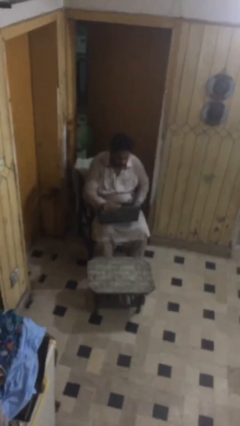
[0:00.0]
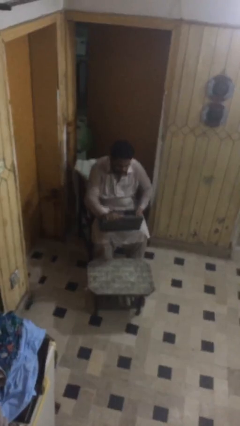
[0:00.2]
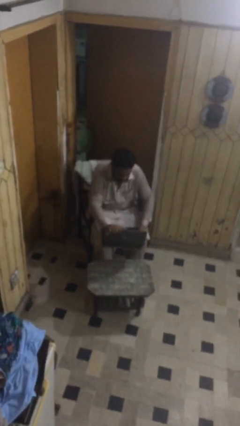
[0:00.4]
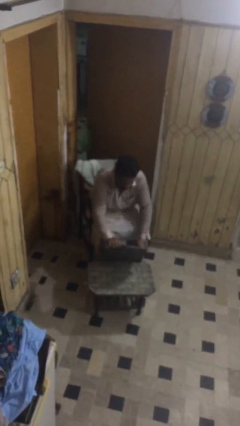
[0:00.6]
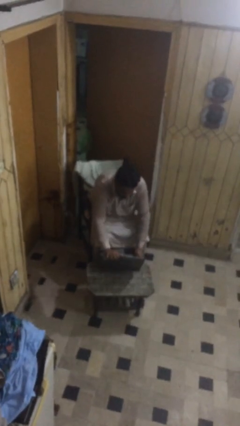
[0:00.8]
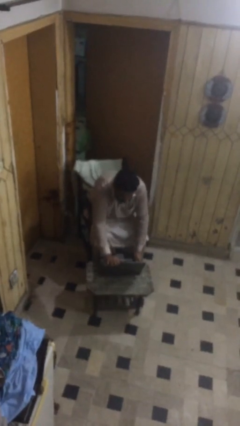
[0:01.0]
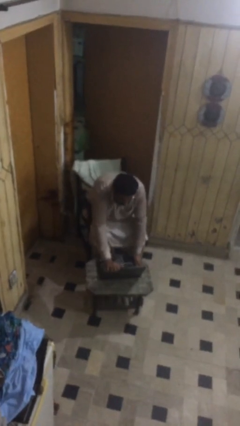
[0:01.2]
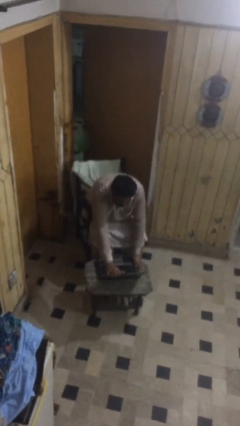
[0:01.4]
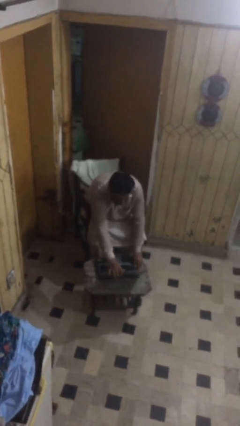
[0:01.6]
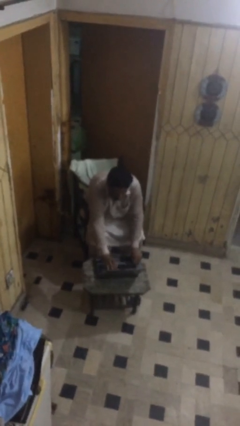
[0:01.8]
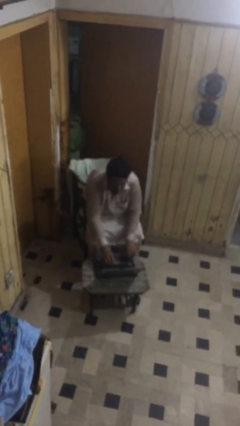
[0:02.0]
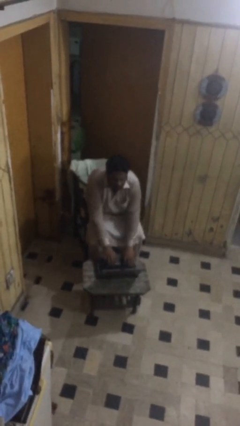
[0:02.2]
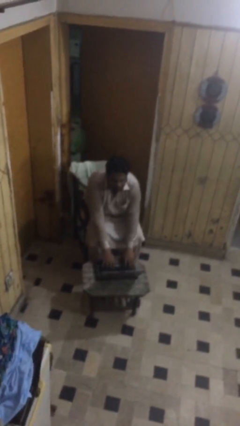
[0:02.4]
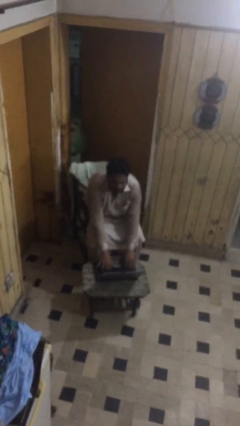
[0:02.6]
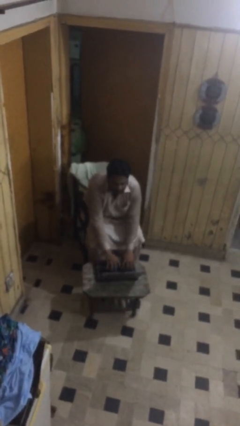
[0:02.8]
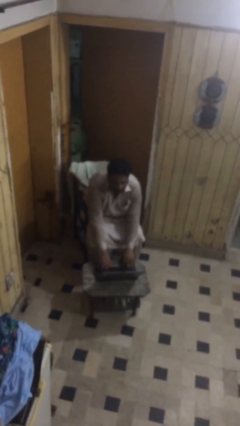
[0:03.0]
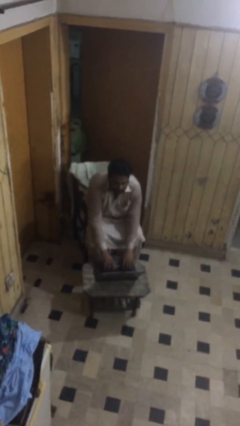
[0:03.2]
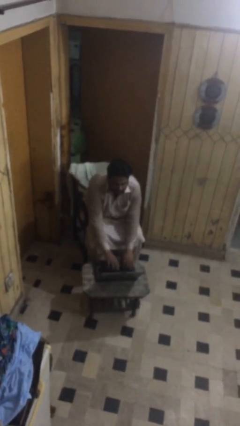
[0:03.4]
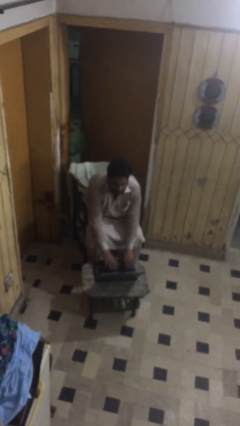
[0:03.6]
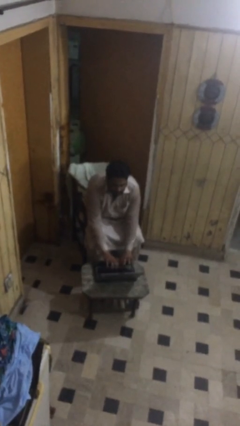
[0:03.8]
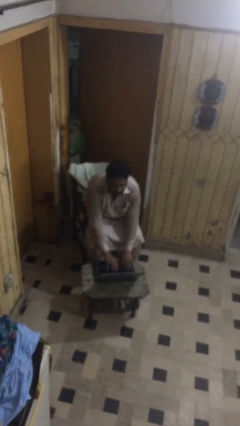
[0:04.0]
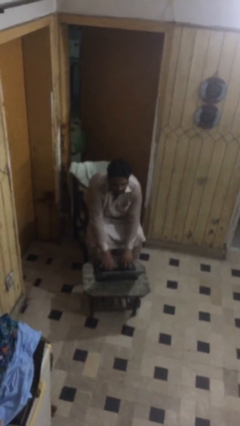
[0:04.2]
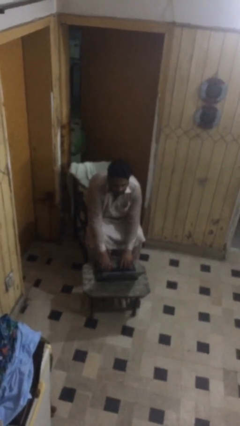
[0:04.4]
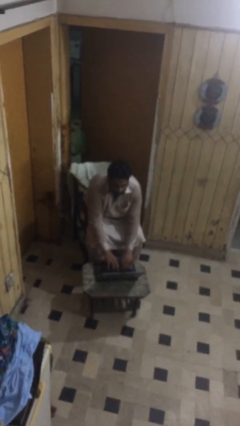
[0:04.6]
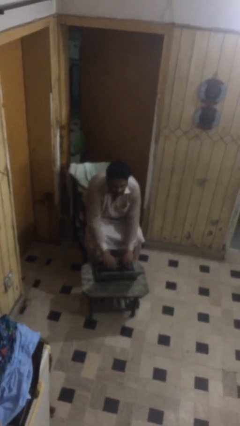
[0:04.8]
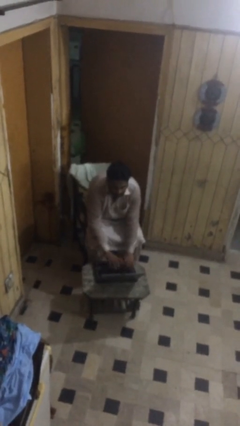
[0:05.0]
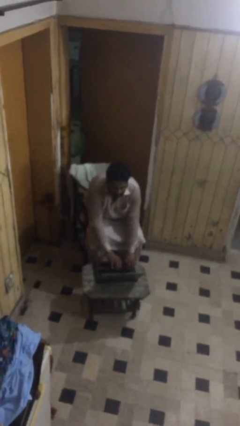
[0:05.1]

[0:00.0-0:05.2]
person interacts with laptop

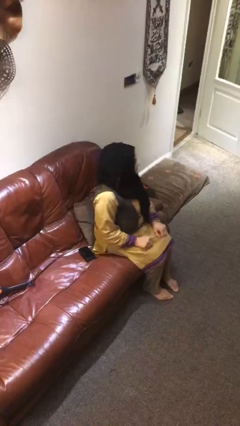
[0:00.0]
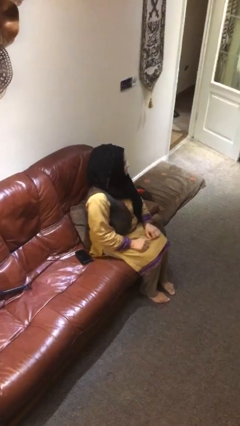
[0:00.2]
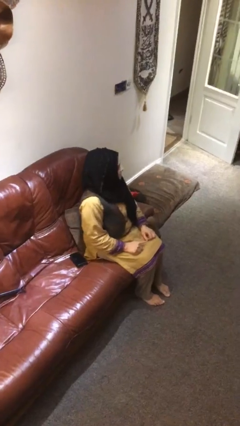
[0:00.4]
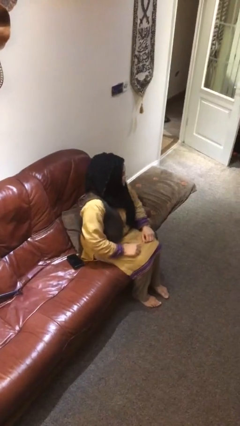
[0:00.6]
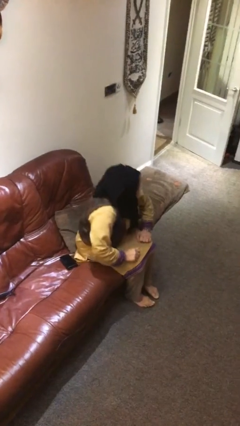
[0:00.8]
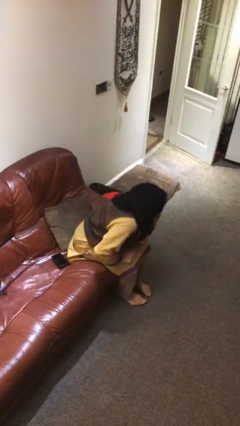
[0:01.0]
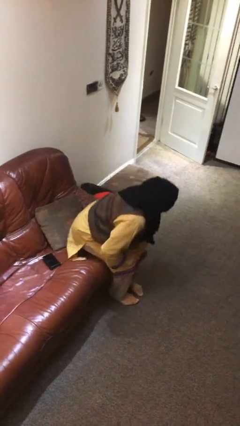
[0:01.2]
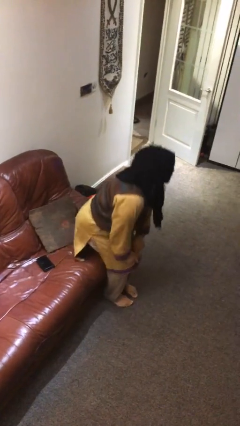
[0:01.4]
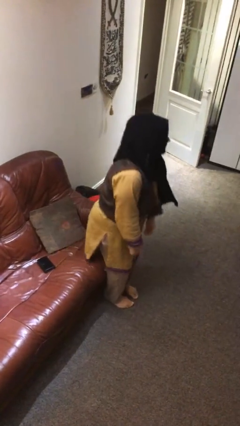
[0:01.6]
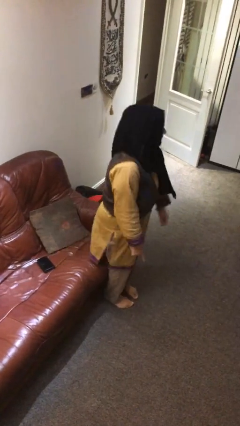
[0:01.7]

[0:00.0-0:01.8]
person stands up

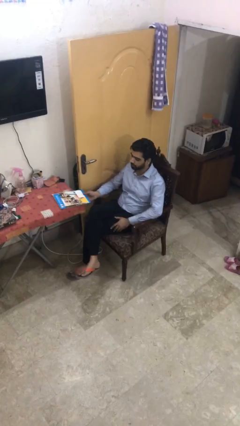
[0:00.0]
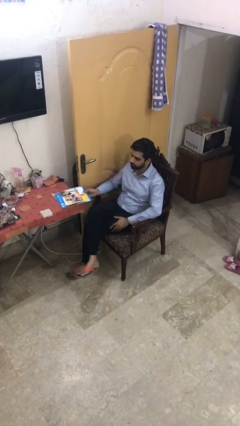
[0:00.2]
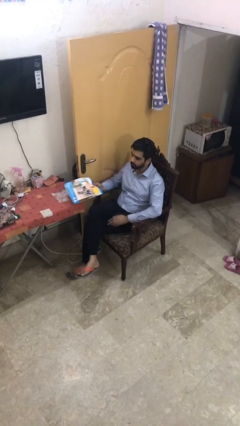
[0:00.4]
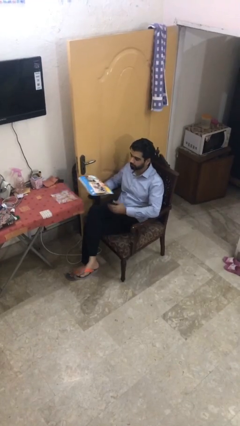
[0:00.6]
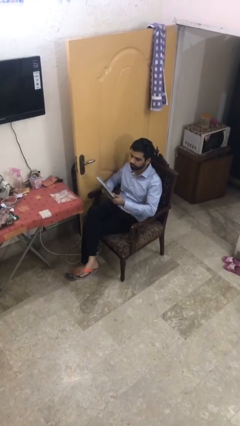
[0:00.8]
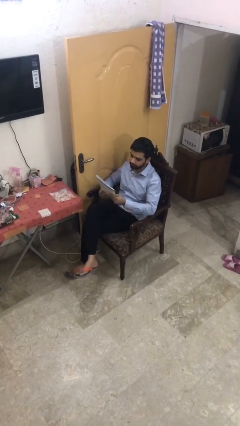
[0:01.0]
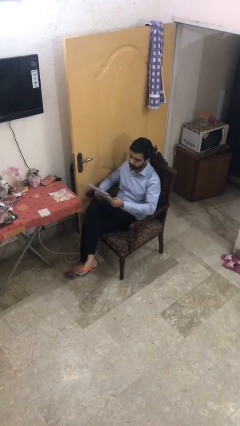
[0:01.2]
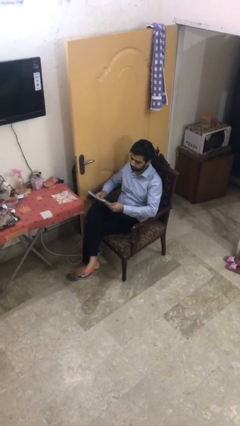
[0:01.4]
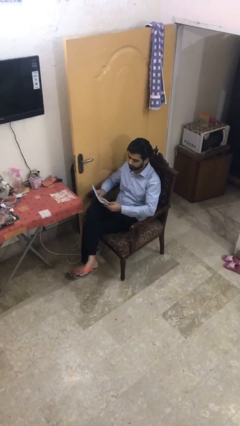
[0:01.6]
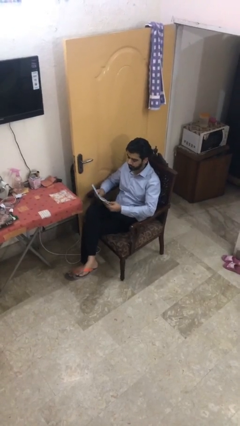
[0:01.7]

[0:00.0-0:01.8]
person picks up object from table

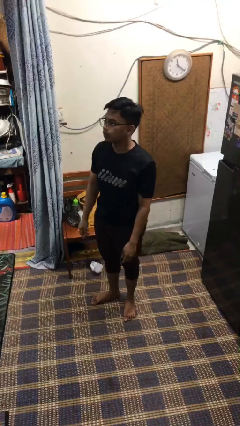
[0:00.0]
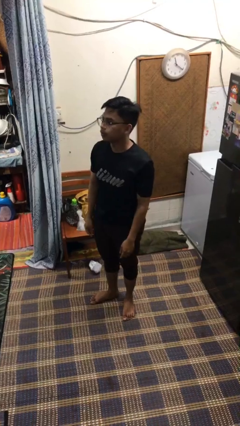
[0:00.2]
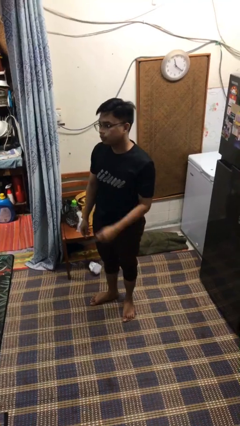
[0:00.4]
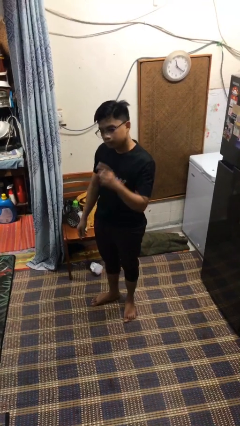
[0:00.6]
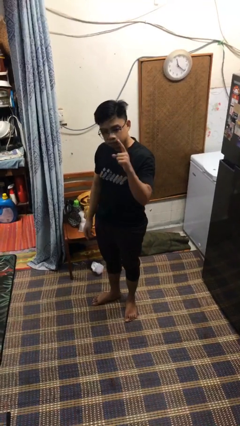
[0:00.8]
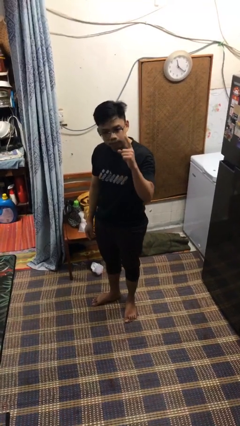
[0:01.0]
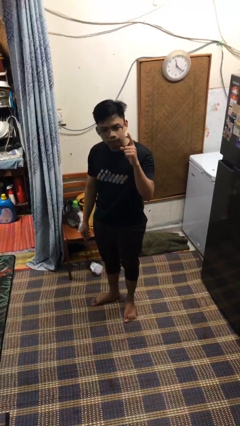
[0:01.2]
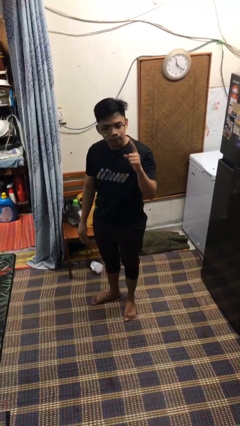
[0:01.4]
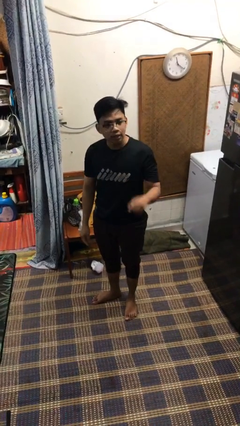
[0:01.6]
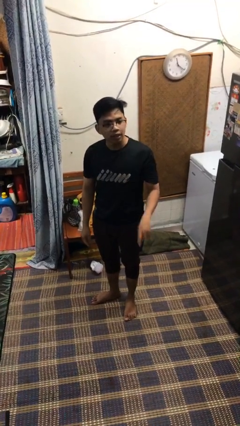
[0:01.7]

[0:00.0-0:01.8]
person gestures number one

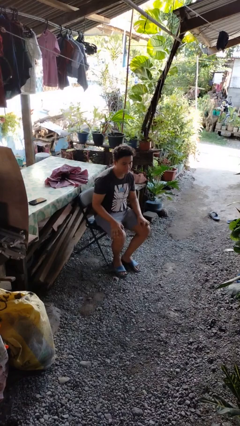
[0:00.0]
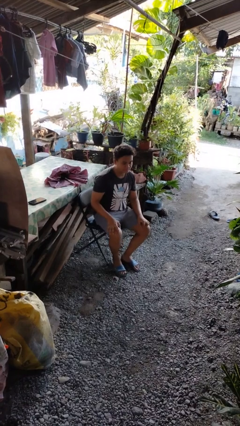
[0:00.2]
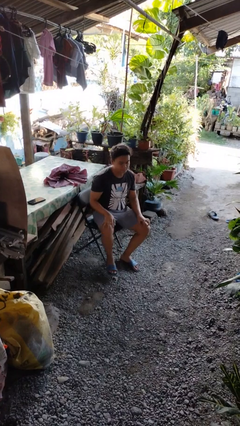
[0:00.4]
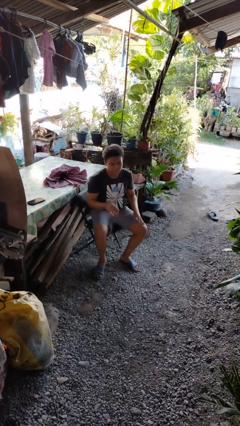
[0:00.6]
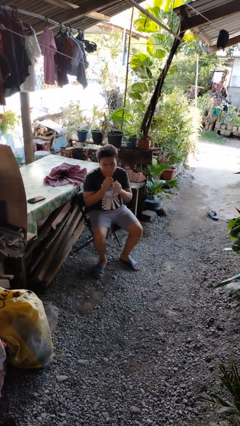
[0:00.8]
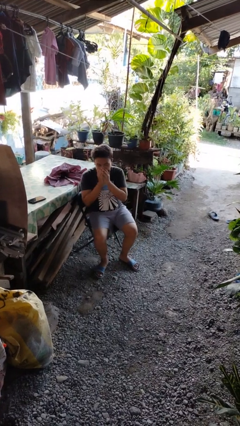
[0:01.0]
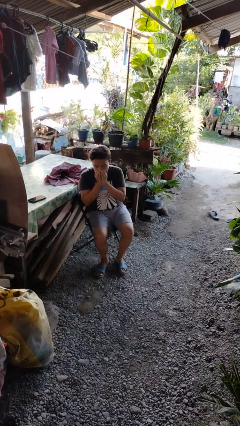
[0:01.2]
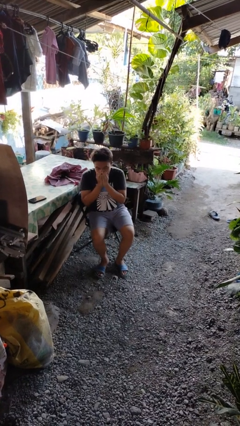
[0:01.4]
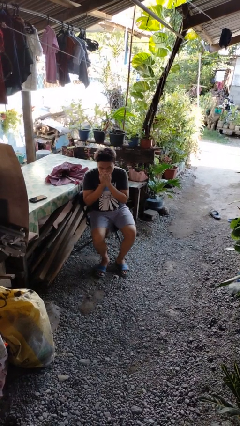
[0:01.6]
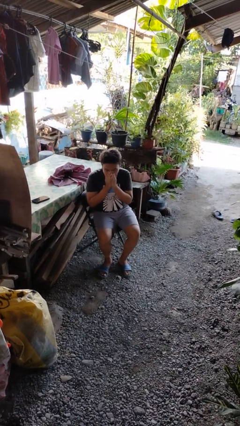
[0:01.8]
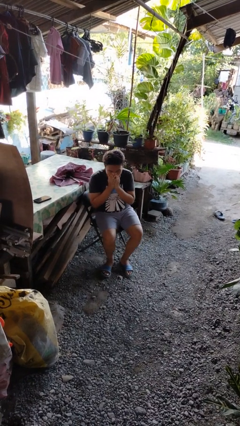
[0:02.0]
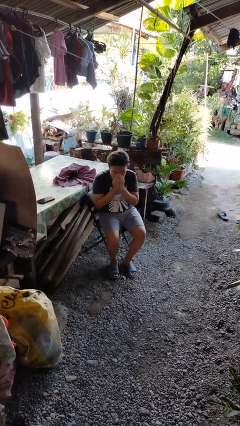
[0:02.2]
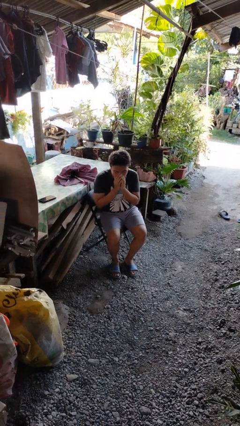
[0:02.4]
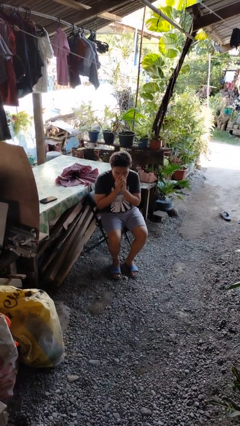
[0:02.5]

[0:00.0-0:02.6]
person blows into hands

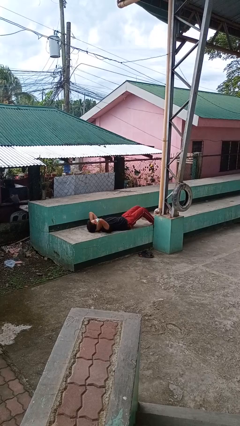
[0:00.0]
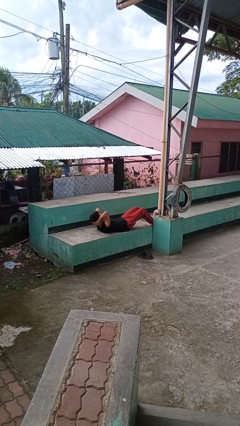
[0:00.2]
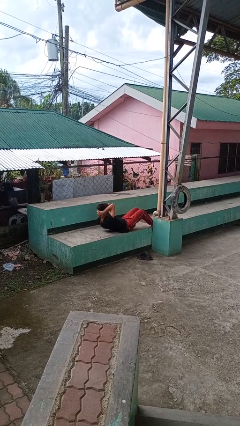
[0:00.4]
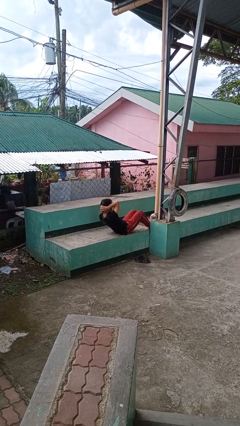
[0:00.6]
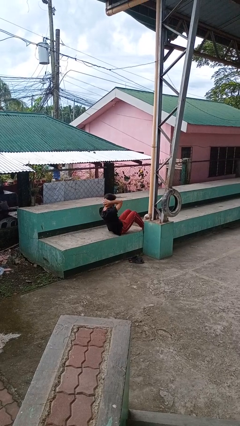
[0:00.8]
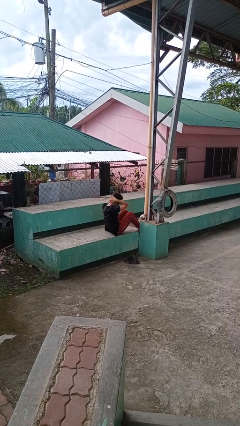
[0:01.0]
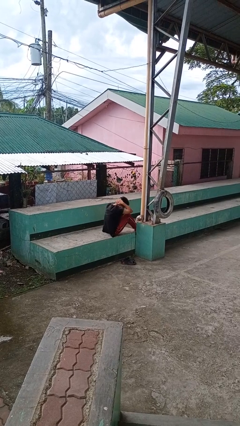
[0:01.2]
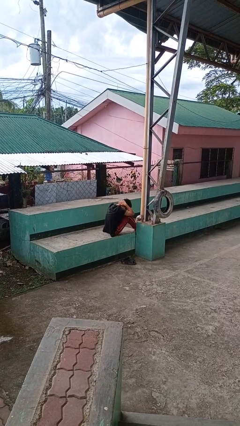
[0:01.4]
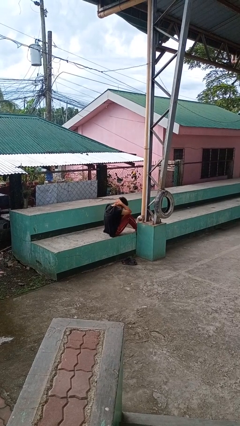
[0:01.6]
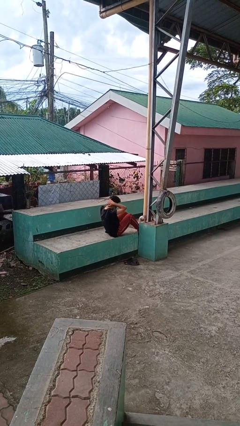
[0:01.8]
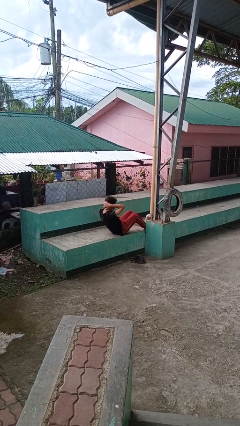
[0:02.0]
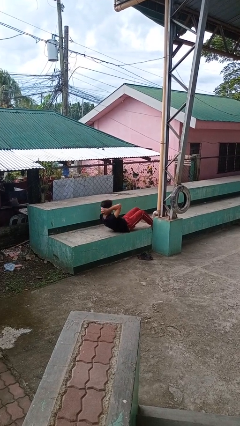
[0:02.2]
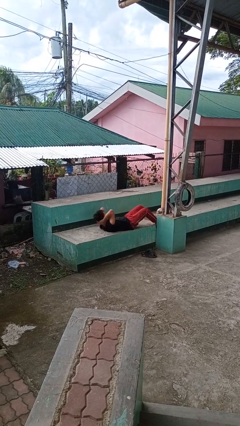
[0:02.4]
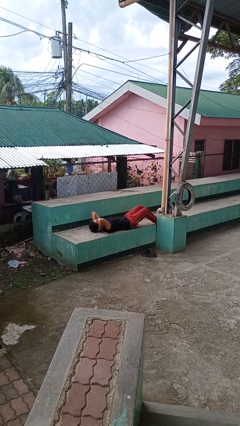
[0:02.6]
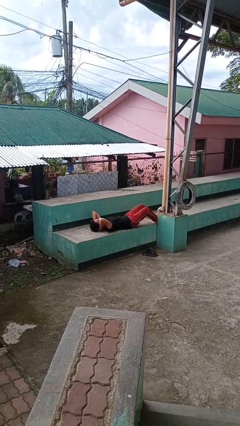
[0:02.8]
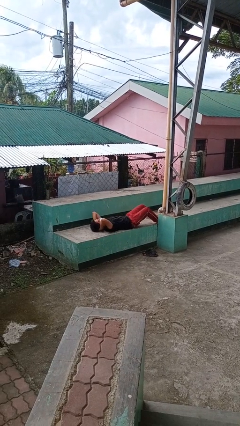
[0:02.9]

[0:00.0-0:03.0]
person exercises with situp

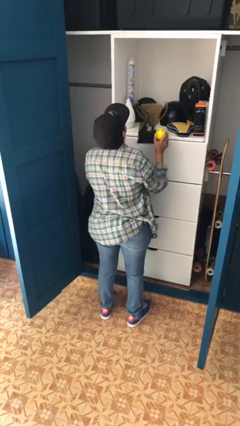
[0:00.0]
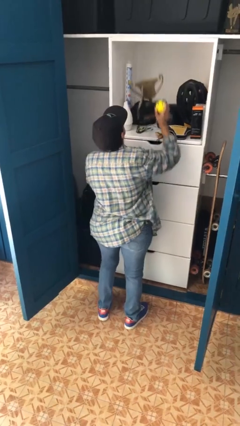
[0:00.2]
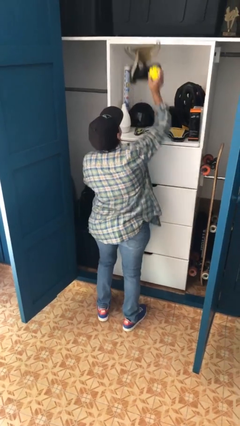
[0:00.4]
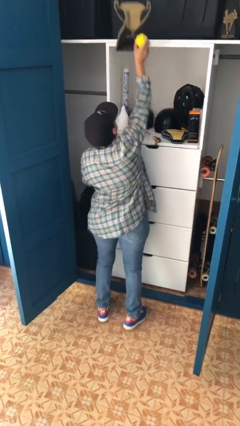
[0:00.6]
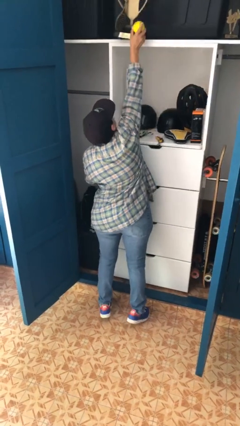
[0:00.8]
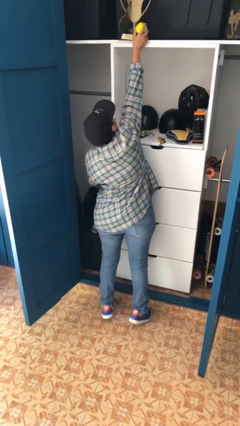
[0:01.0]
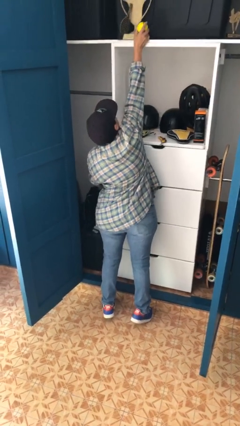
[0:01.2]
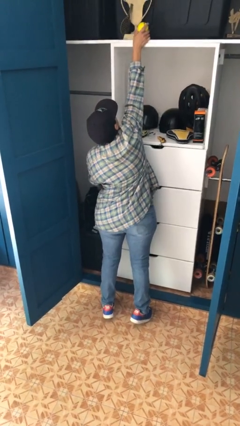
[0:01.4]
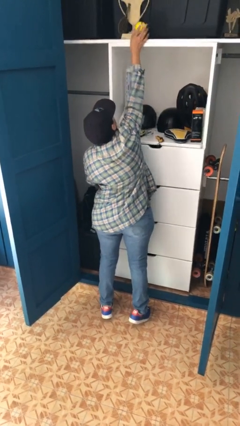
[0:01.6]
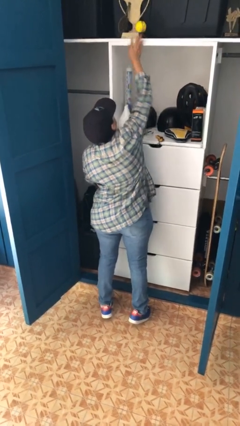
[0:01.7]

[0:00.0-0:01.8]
person puts down object on shelf
